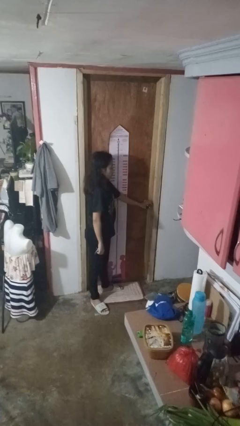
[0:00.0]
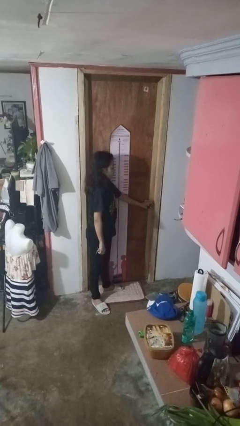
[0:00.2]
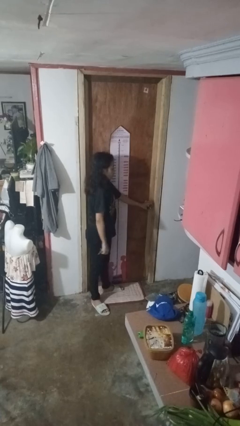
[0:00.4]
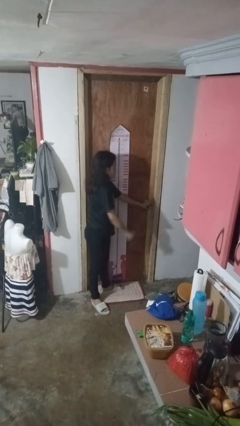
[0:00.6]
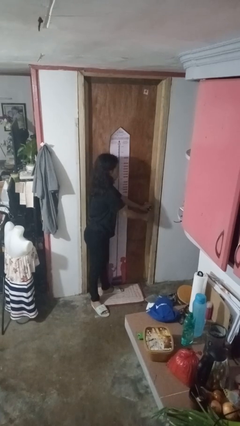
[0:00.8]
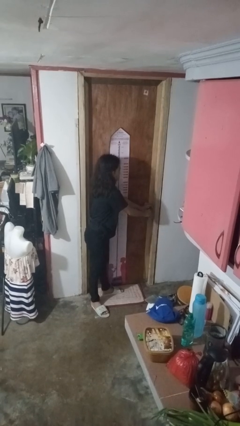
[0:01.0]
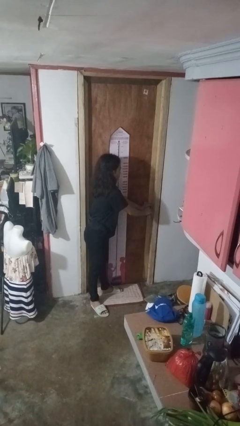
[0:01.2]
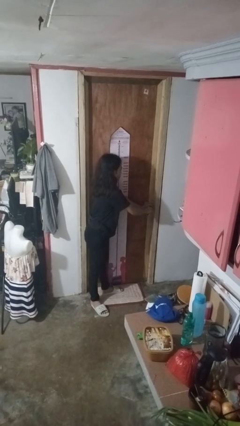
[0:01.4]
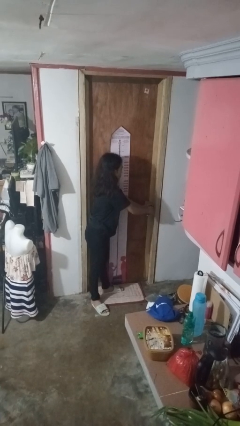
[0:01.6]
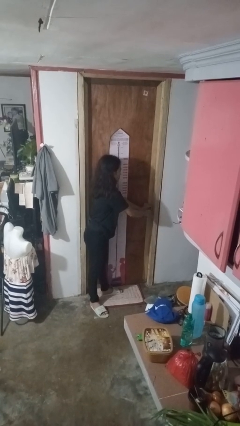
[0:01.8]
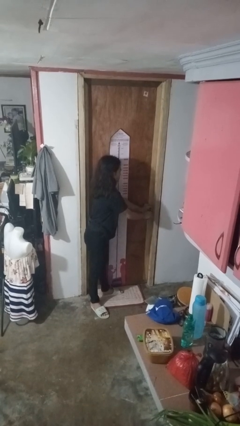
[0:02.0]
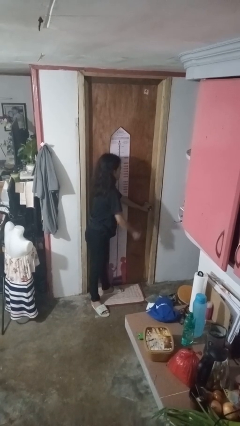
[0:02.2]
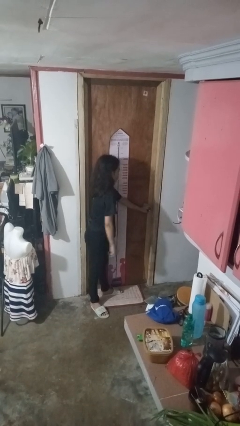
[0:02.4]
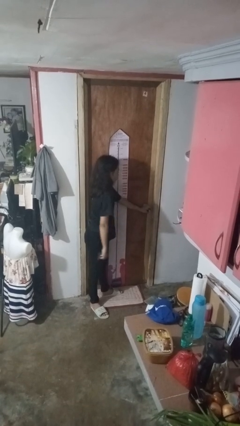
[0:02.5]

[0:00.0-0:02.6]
person unlocks door with keys

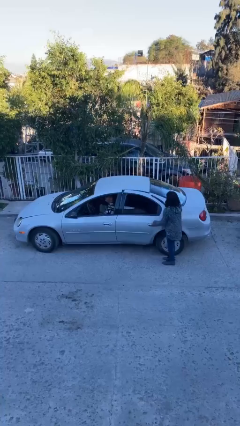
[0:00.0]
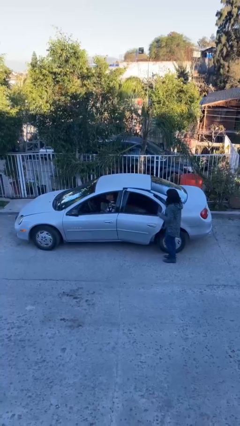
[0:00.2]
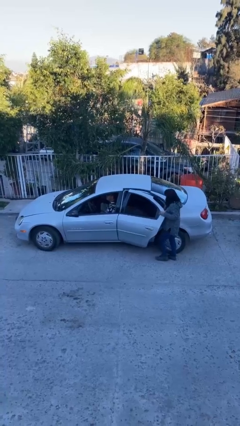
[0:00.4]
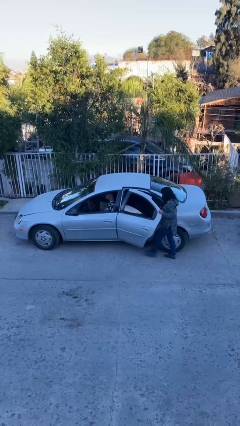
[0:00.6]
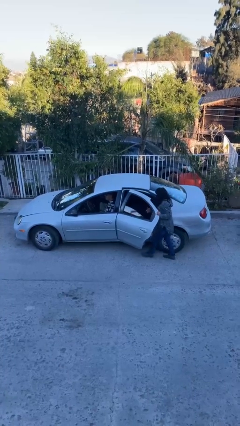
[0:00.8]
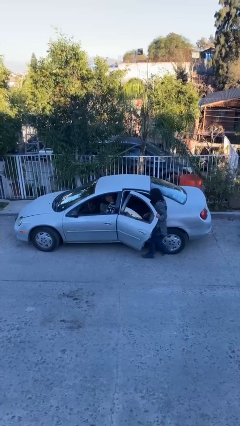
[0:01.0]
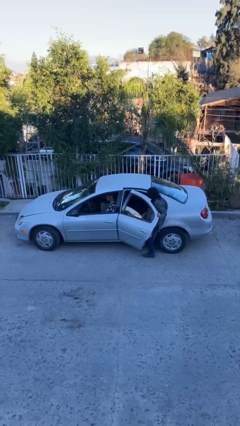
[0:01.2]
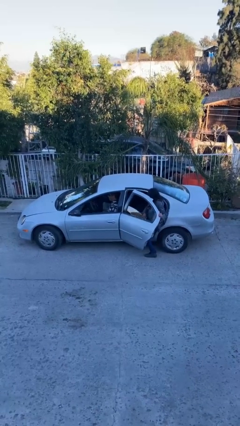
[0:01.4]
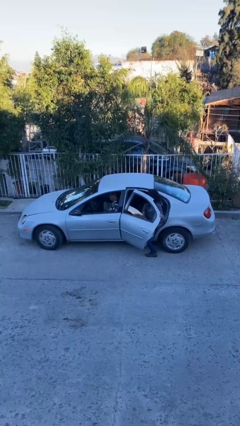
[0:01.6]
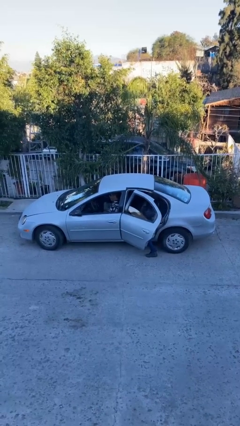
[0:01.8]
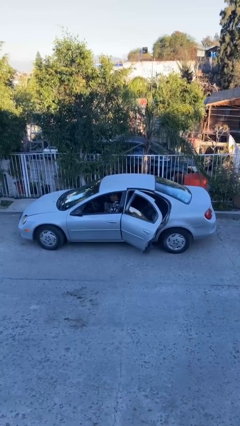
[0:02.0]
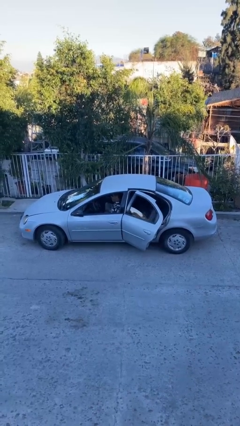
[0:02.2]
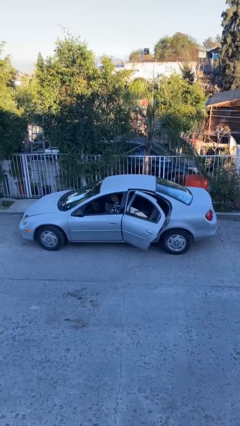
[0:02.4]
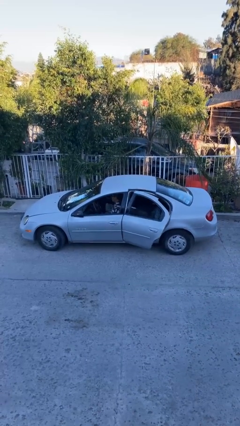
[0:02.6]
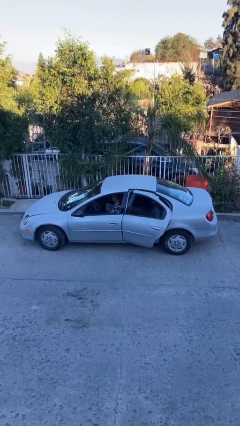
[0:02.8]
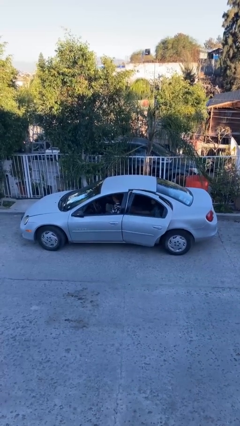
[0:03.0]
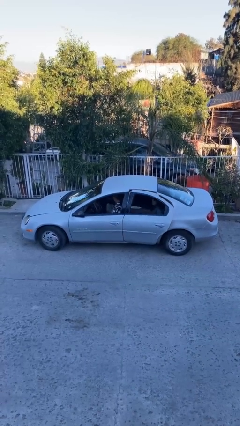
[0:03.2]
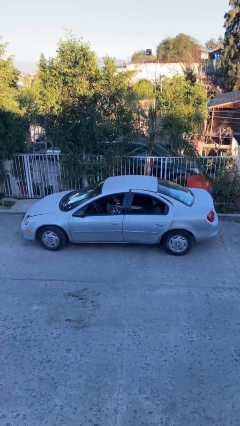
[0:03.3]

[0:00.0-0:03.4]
car picks up person

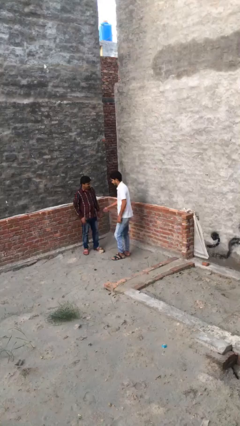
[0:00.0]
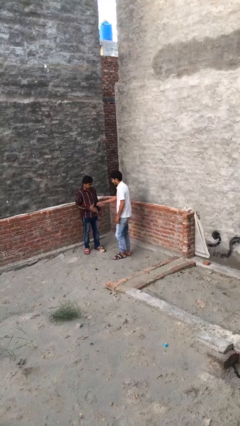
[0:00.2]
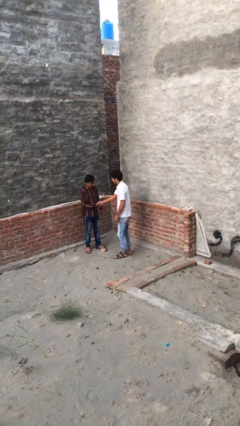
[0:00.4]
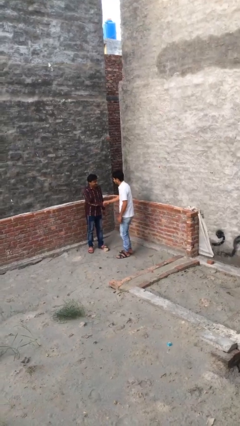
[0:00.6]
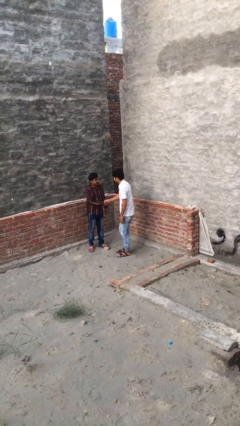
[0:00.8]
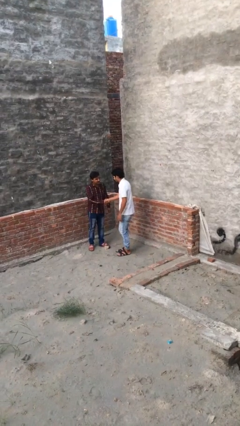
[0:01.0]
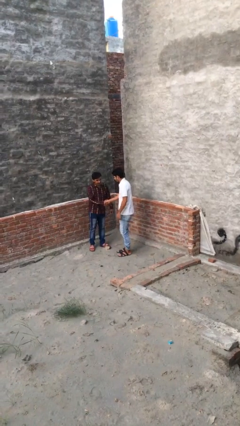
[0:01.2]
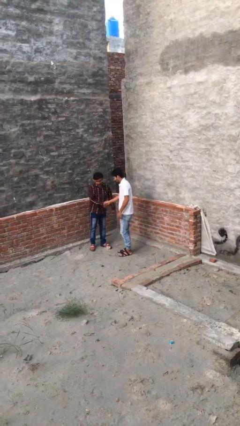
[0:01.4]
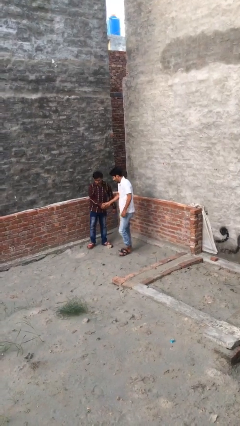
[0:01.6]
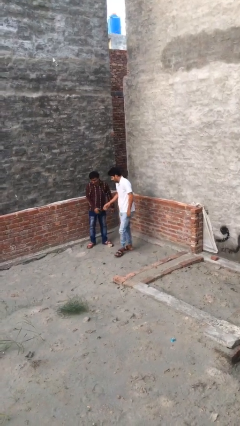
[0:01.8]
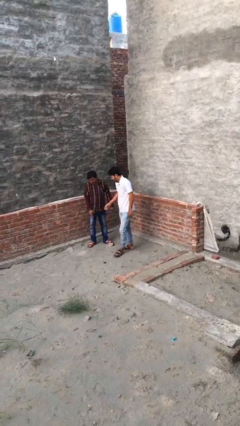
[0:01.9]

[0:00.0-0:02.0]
person shakes hand

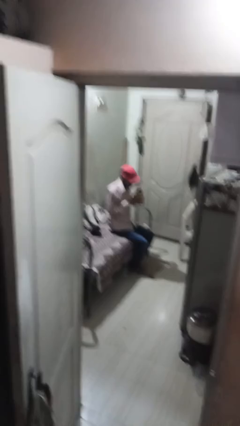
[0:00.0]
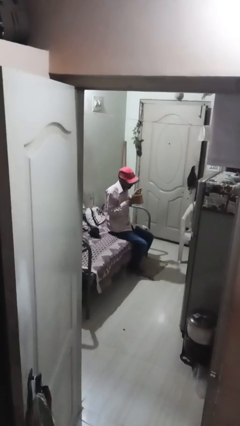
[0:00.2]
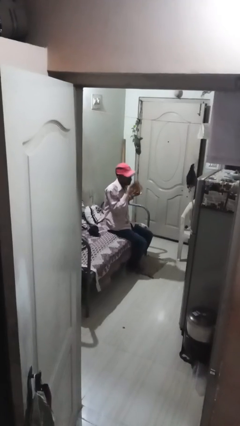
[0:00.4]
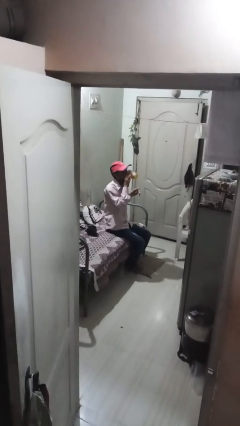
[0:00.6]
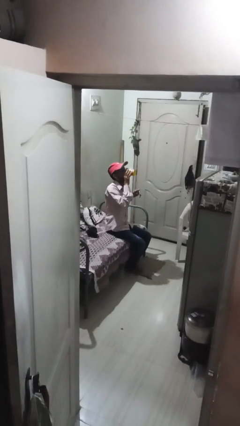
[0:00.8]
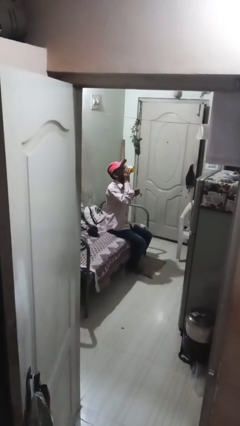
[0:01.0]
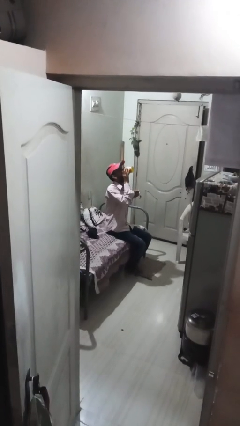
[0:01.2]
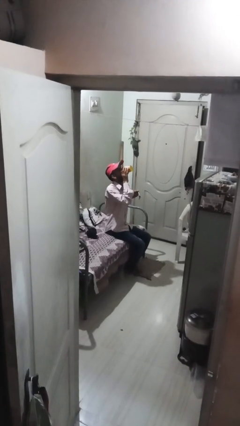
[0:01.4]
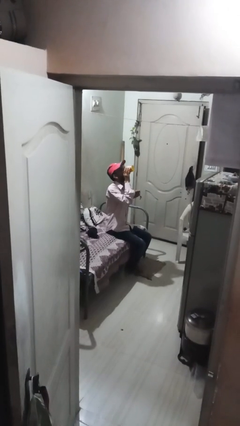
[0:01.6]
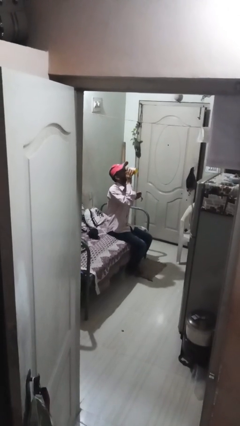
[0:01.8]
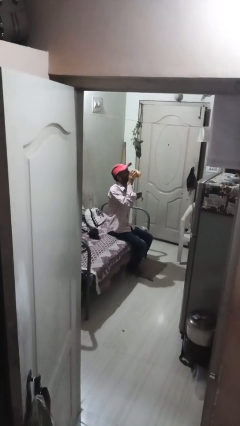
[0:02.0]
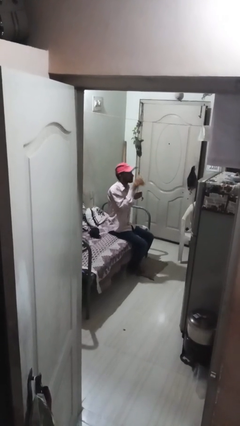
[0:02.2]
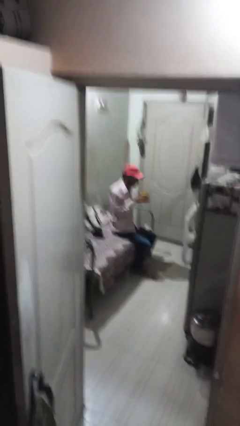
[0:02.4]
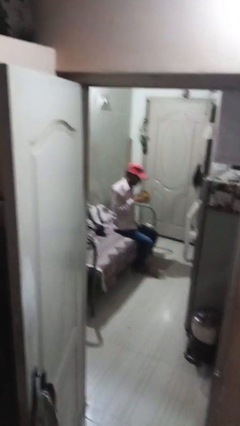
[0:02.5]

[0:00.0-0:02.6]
person drinks from mug

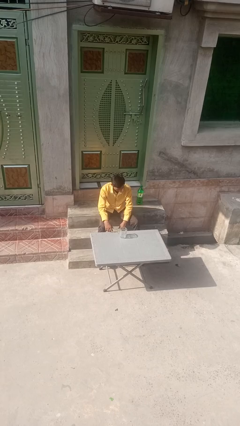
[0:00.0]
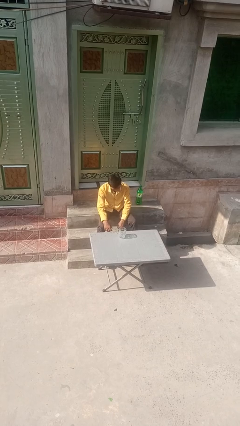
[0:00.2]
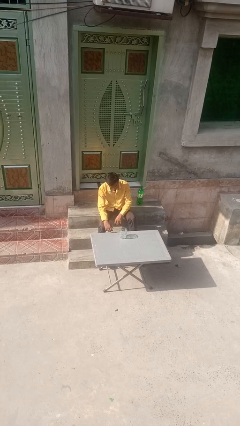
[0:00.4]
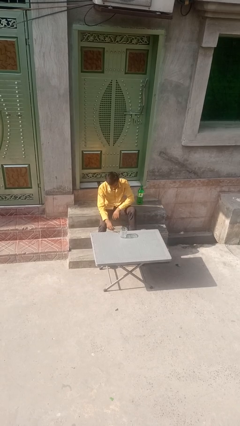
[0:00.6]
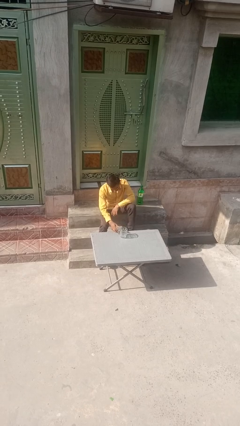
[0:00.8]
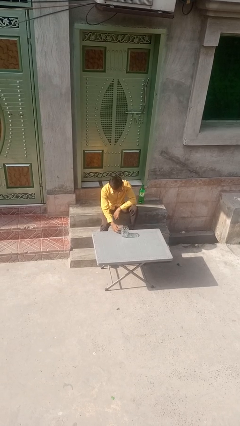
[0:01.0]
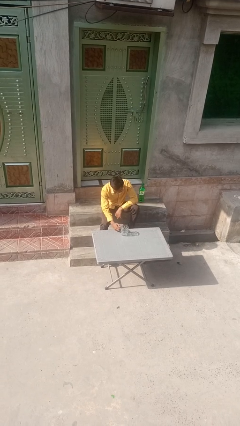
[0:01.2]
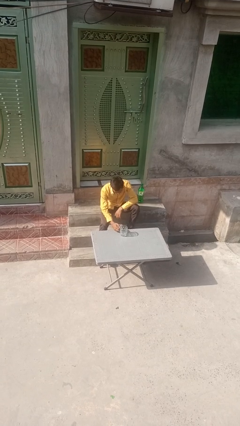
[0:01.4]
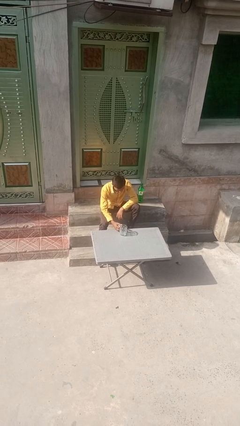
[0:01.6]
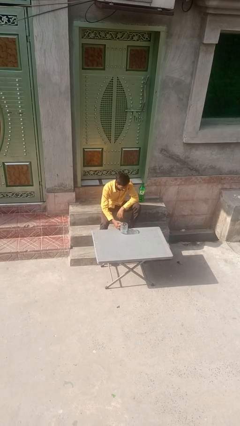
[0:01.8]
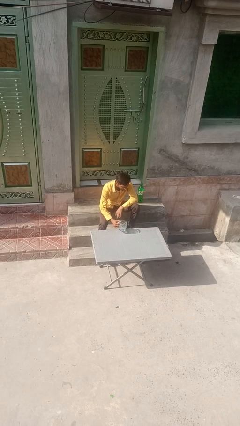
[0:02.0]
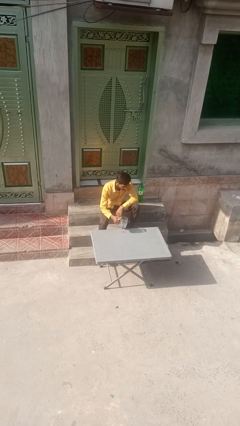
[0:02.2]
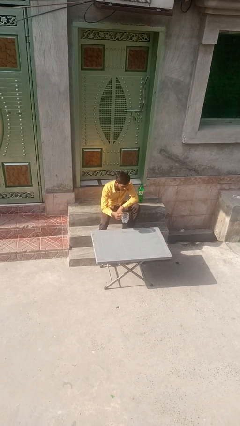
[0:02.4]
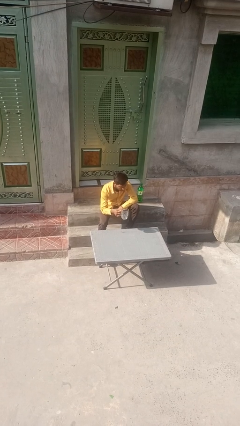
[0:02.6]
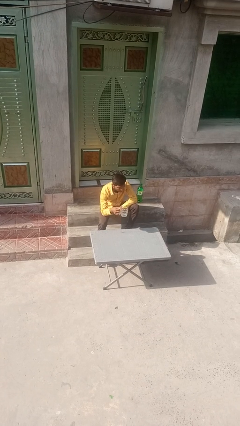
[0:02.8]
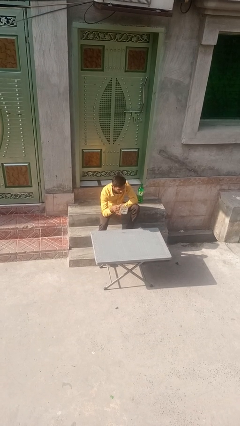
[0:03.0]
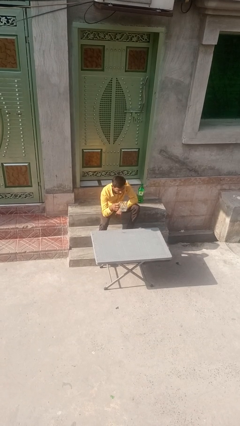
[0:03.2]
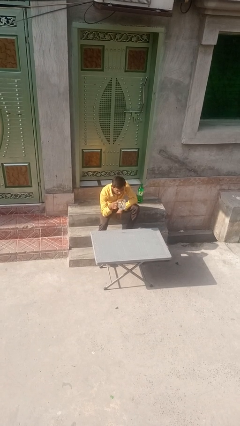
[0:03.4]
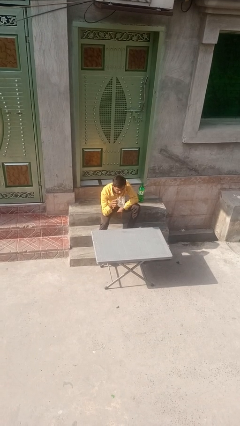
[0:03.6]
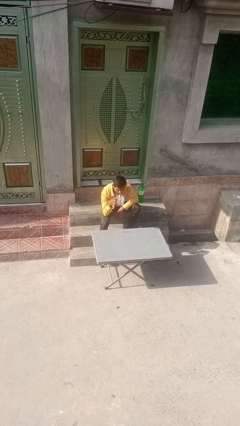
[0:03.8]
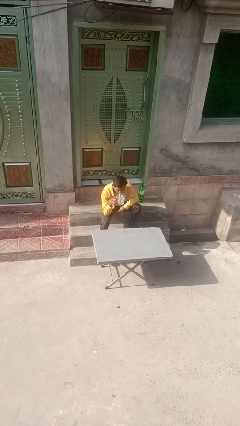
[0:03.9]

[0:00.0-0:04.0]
person picks up object from table

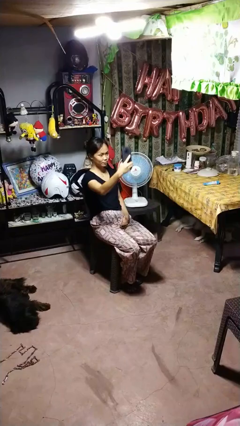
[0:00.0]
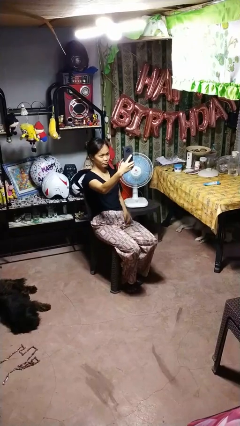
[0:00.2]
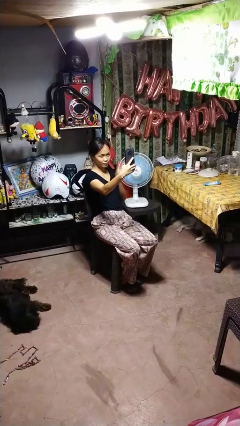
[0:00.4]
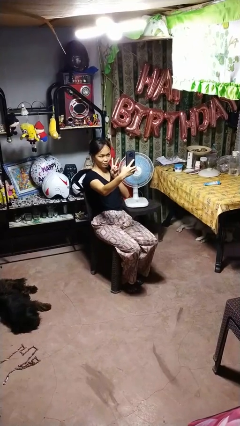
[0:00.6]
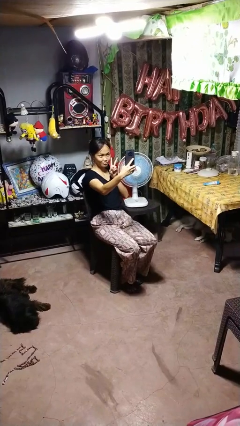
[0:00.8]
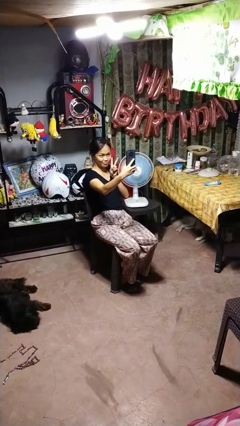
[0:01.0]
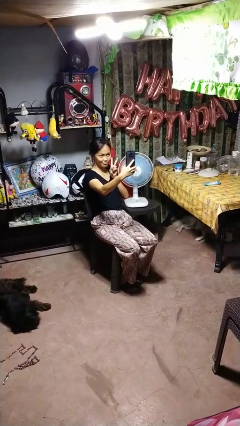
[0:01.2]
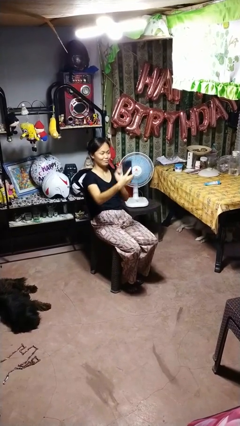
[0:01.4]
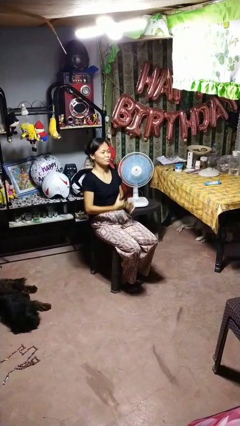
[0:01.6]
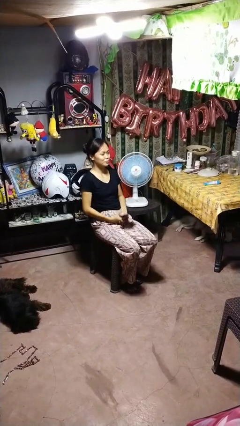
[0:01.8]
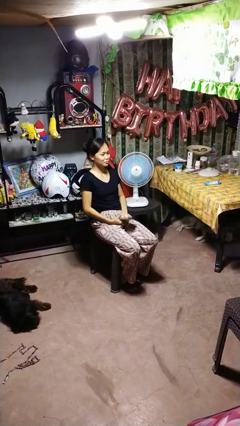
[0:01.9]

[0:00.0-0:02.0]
person takes selfie

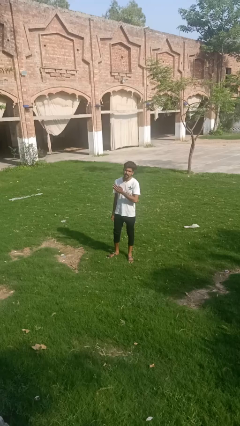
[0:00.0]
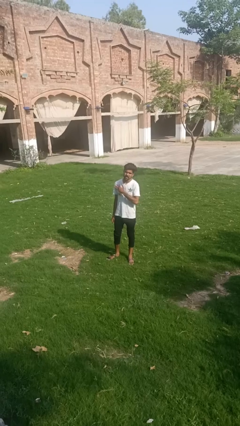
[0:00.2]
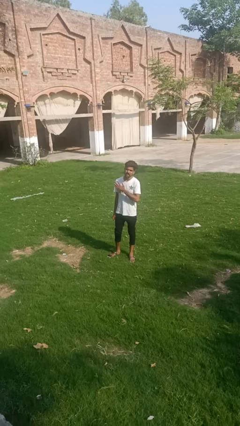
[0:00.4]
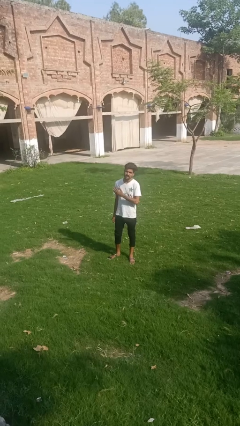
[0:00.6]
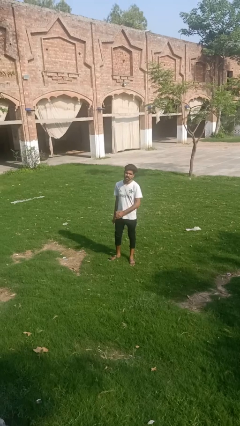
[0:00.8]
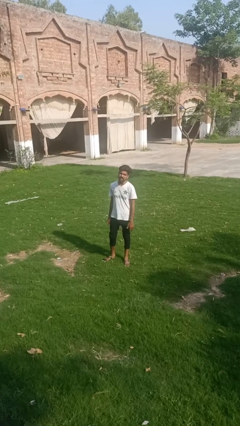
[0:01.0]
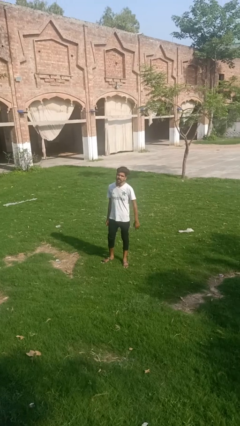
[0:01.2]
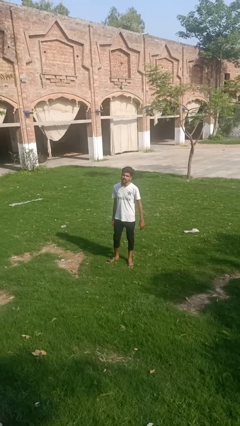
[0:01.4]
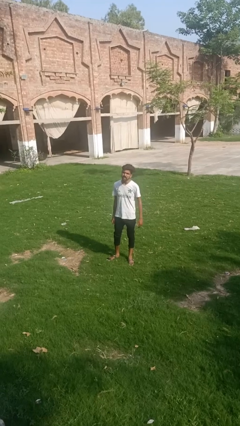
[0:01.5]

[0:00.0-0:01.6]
person drums on chest
